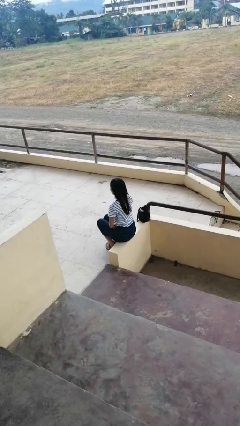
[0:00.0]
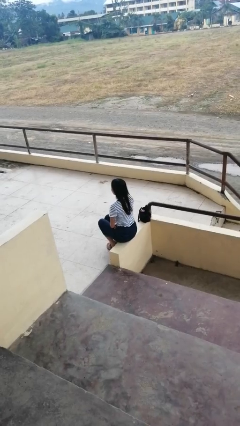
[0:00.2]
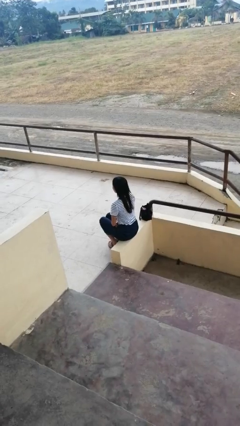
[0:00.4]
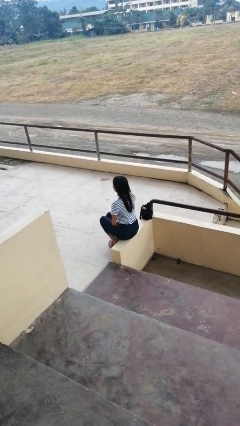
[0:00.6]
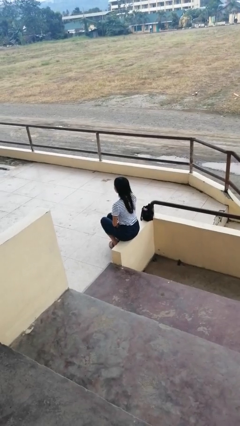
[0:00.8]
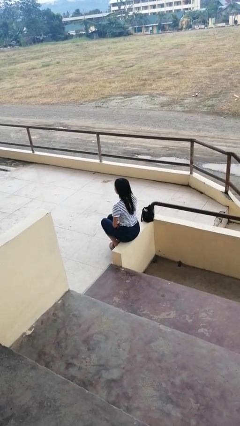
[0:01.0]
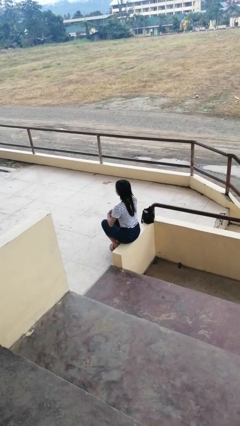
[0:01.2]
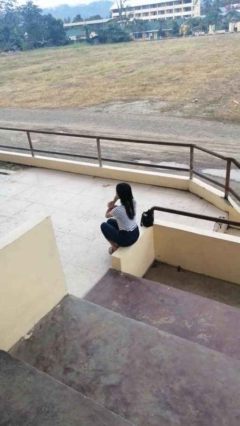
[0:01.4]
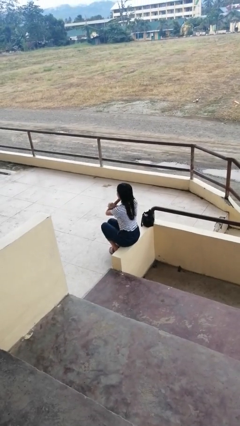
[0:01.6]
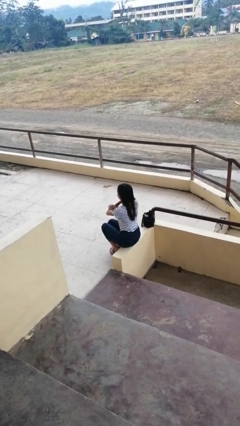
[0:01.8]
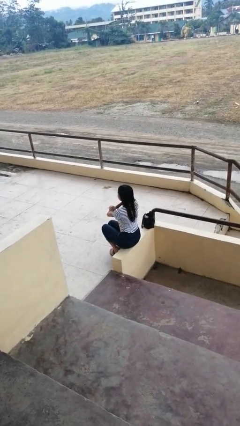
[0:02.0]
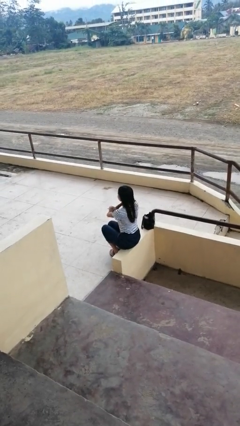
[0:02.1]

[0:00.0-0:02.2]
person gestures arms x

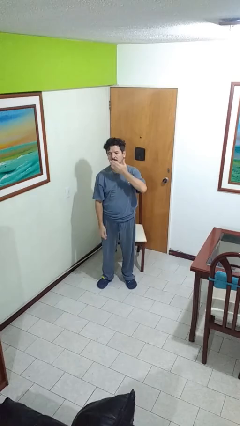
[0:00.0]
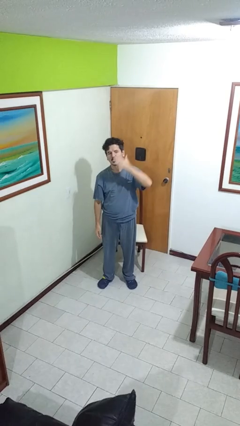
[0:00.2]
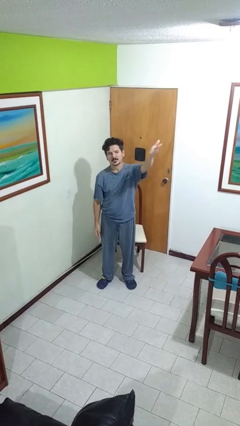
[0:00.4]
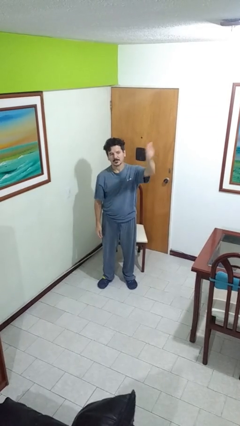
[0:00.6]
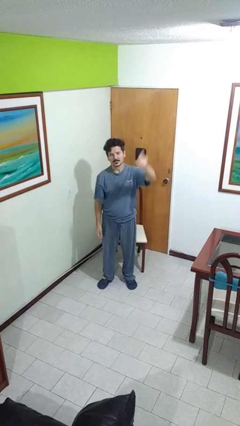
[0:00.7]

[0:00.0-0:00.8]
person gestures blow kiss

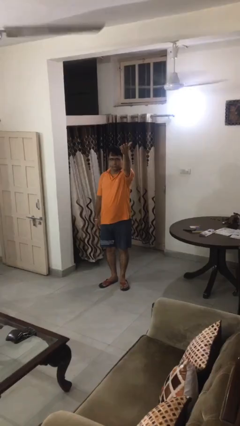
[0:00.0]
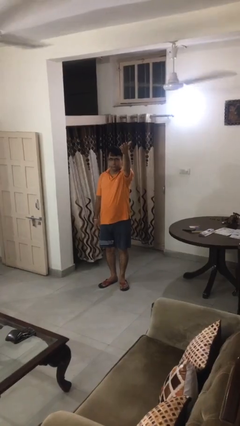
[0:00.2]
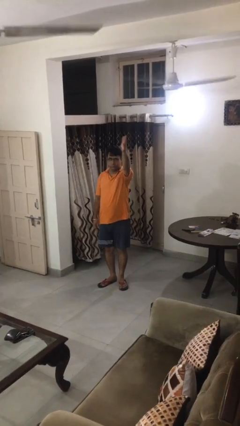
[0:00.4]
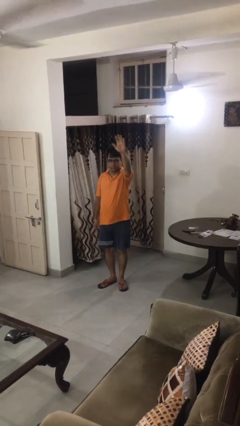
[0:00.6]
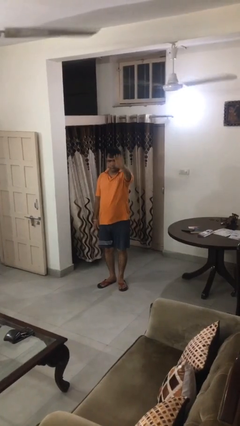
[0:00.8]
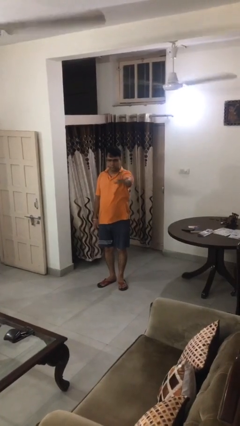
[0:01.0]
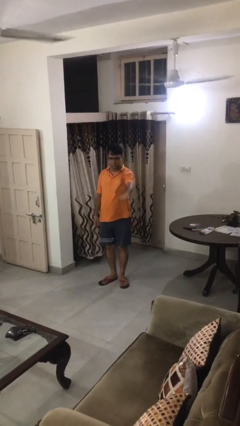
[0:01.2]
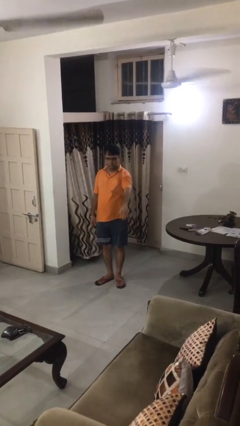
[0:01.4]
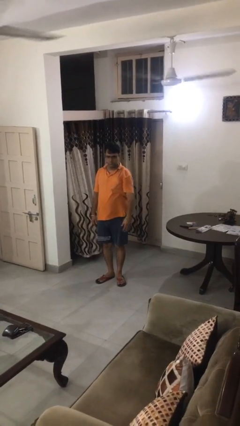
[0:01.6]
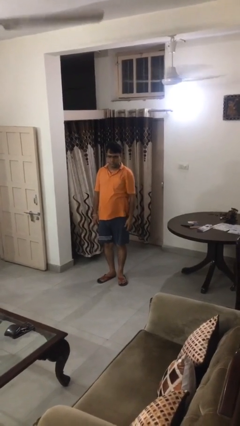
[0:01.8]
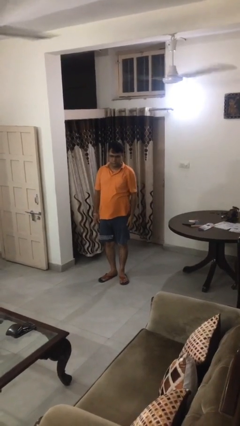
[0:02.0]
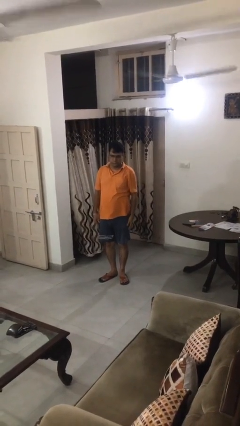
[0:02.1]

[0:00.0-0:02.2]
person gestures swipe down

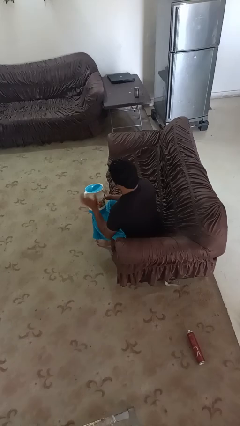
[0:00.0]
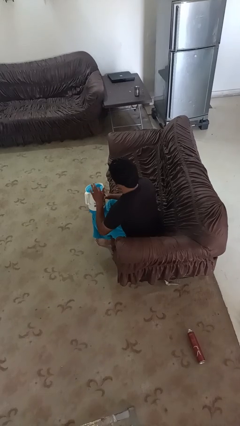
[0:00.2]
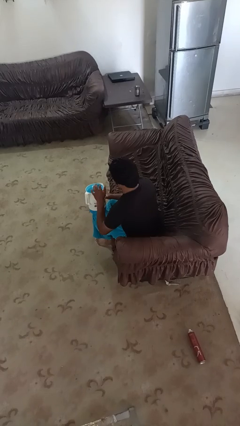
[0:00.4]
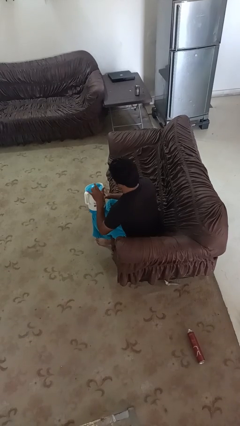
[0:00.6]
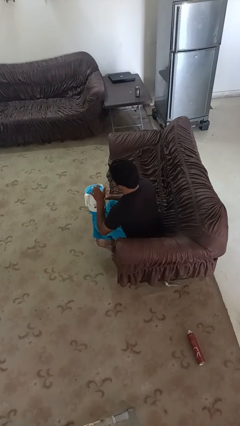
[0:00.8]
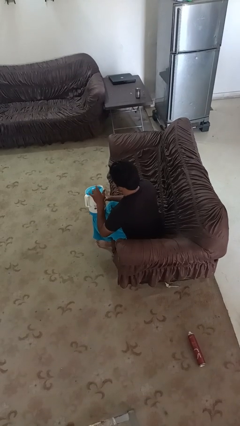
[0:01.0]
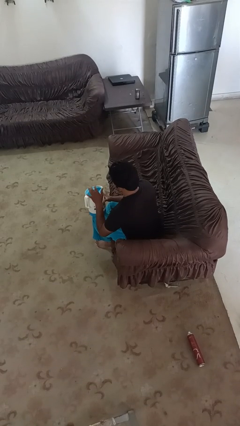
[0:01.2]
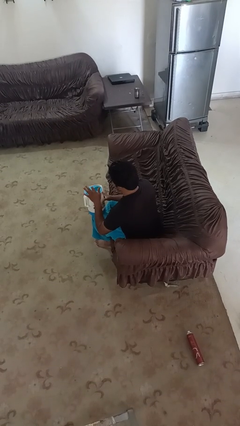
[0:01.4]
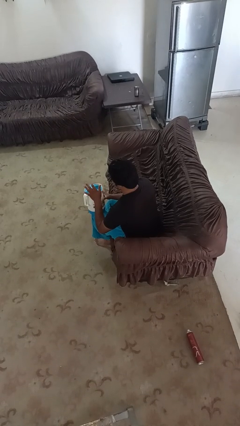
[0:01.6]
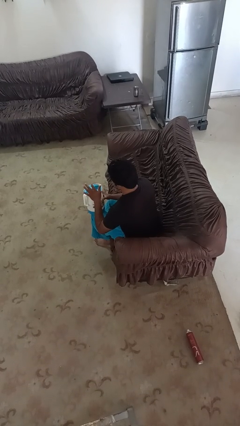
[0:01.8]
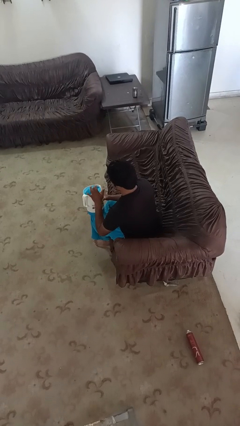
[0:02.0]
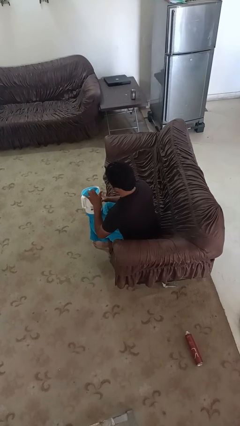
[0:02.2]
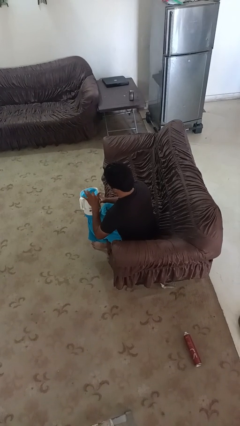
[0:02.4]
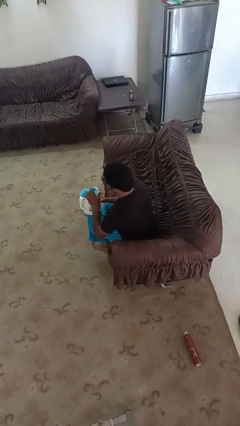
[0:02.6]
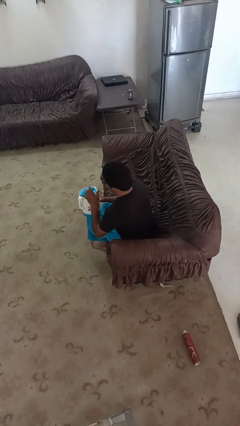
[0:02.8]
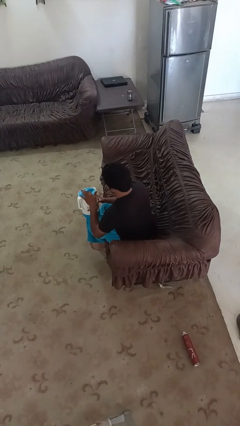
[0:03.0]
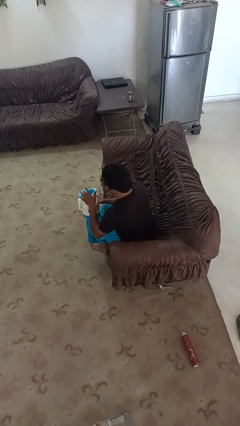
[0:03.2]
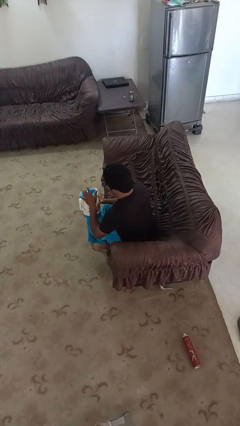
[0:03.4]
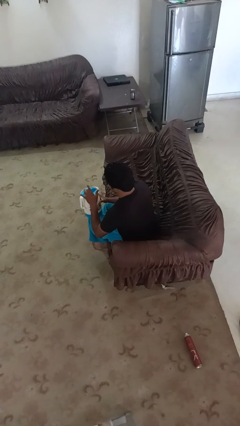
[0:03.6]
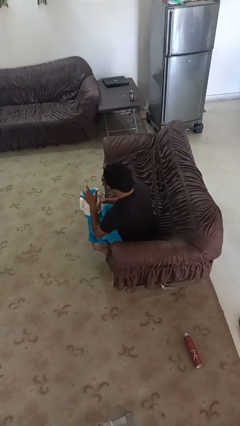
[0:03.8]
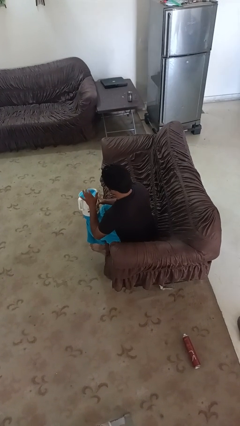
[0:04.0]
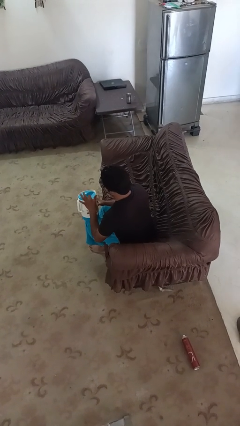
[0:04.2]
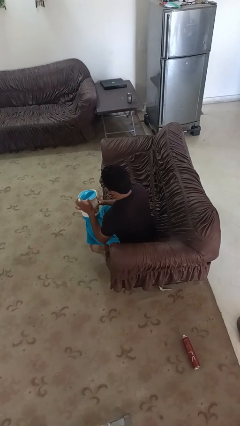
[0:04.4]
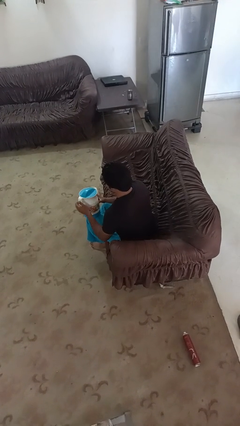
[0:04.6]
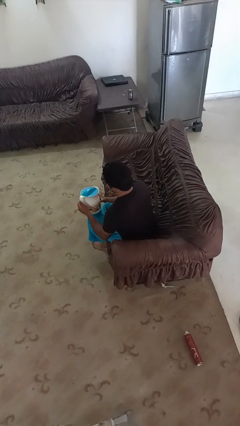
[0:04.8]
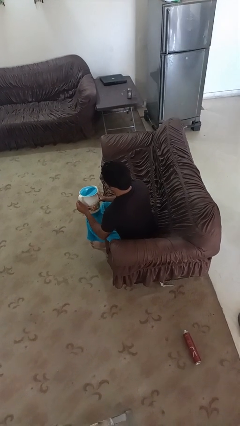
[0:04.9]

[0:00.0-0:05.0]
person taps object with finger

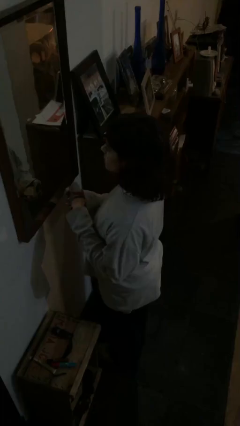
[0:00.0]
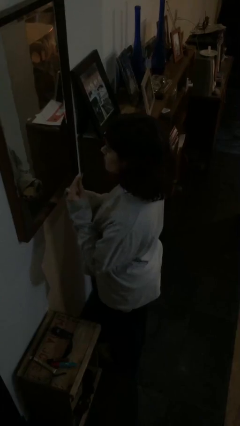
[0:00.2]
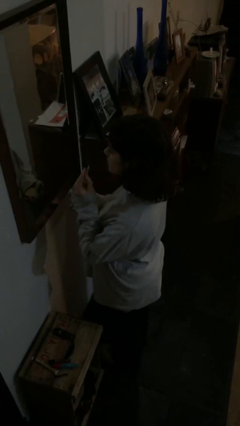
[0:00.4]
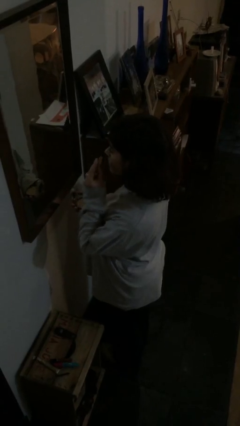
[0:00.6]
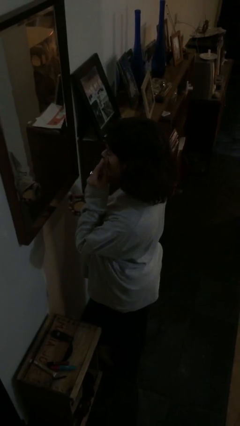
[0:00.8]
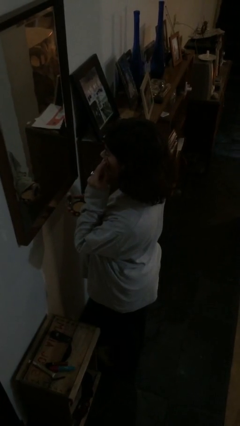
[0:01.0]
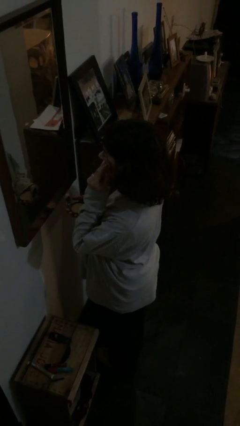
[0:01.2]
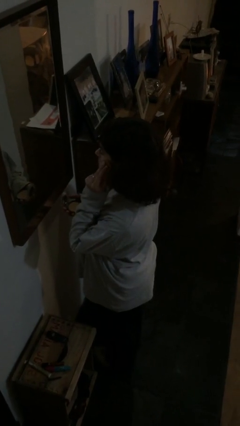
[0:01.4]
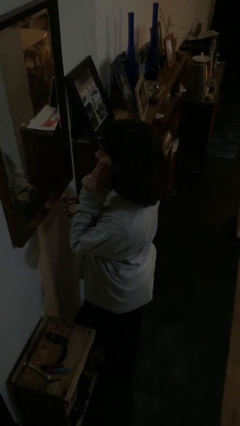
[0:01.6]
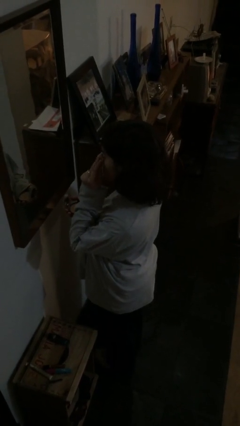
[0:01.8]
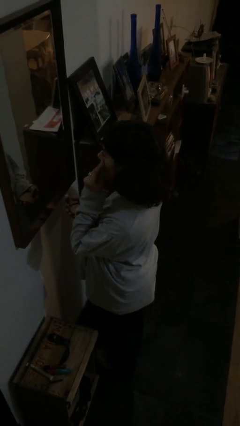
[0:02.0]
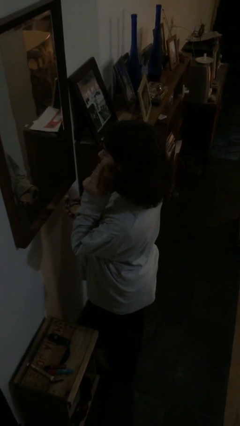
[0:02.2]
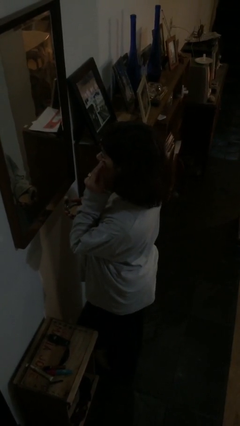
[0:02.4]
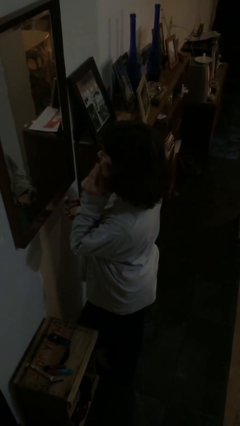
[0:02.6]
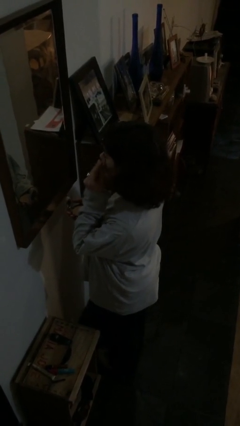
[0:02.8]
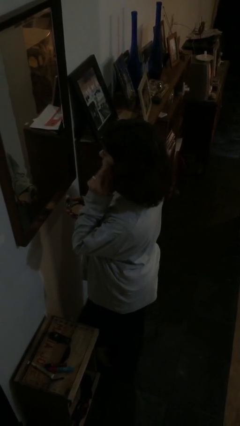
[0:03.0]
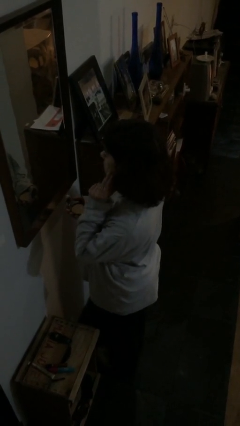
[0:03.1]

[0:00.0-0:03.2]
person applies foundation makeup

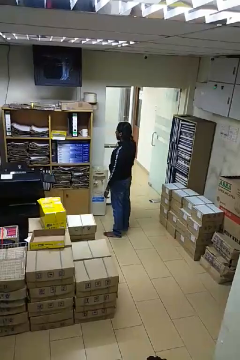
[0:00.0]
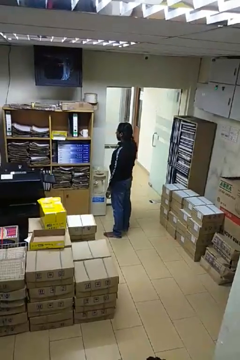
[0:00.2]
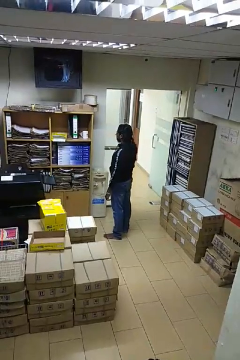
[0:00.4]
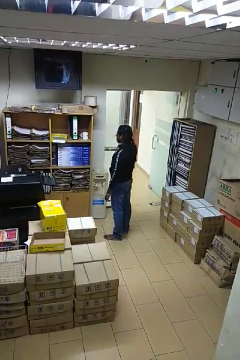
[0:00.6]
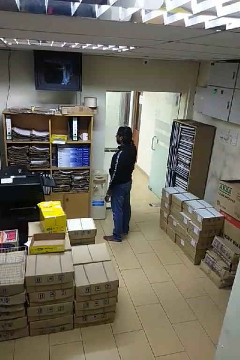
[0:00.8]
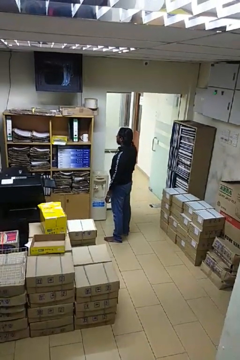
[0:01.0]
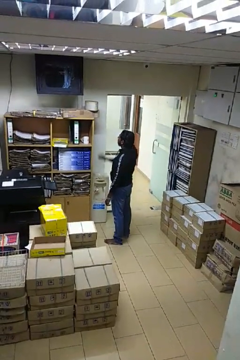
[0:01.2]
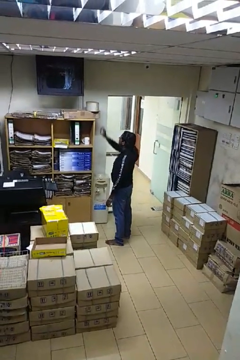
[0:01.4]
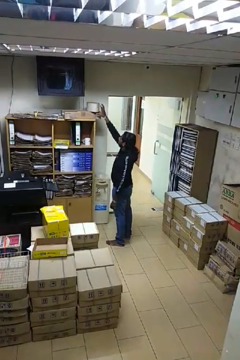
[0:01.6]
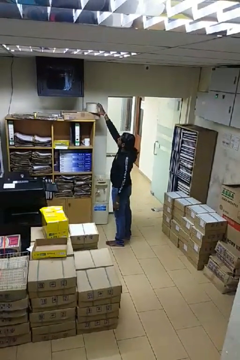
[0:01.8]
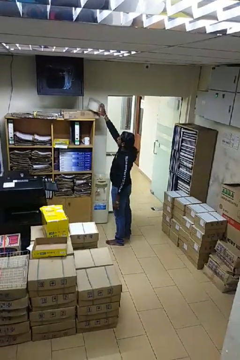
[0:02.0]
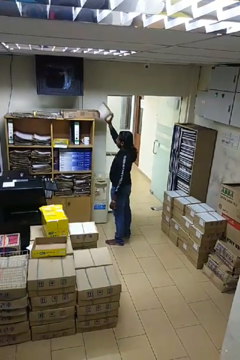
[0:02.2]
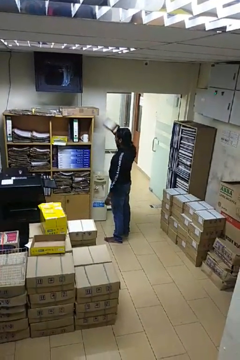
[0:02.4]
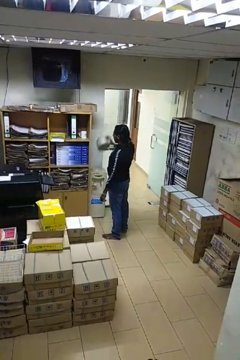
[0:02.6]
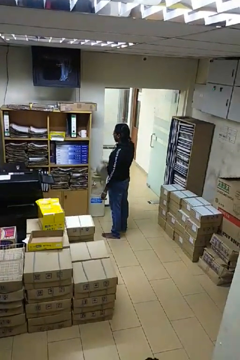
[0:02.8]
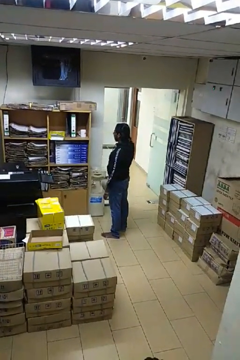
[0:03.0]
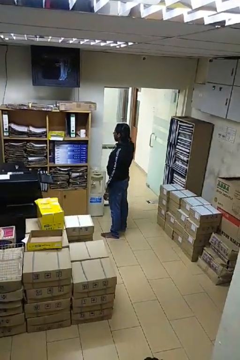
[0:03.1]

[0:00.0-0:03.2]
person picks up object from shelf

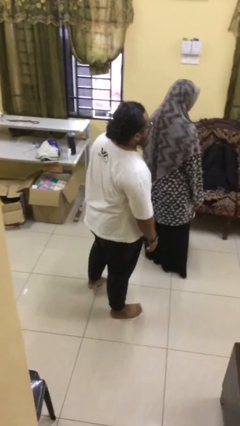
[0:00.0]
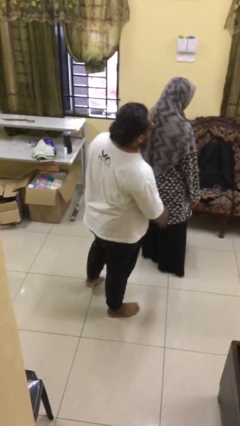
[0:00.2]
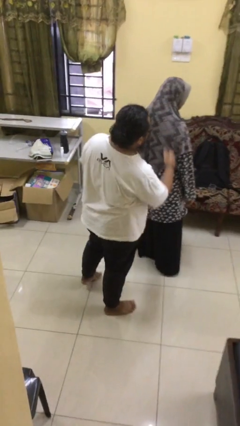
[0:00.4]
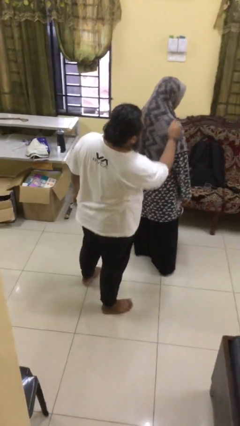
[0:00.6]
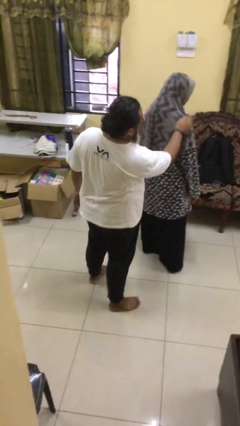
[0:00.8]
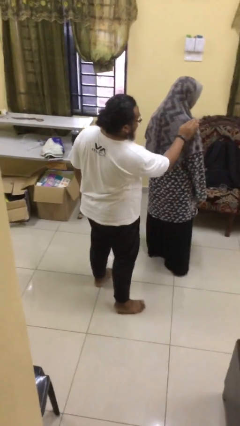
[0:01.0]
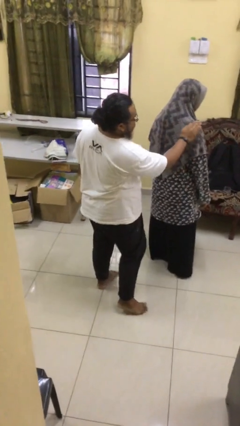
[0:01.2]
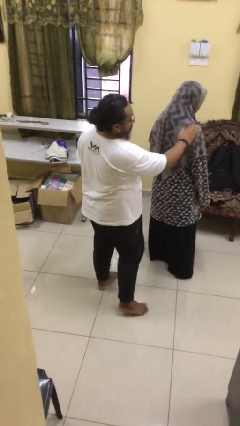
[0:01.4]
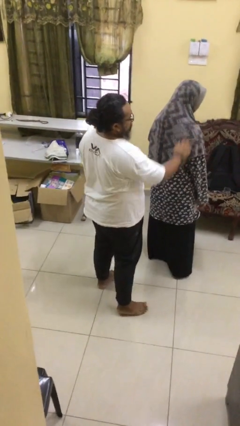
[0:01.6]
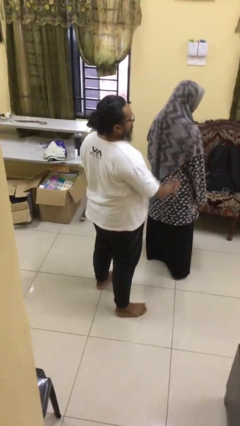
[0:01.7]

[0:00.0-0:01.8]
person touches back of person
